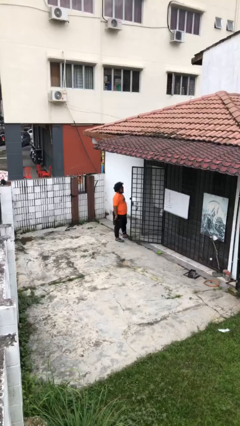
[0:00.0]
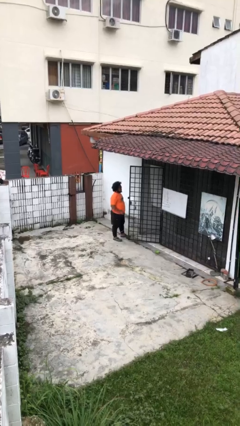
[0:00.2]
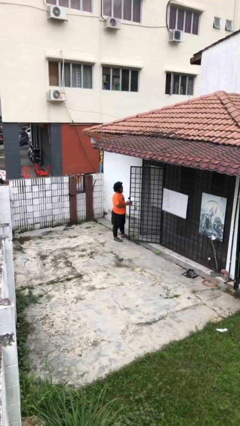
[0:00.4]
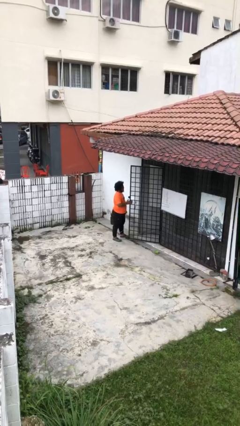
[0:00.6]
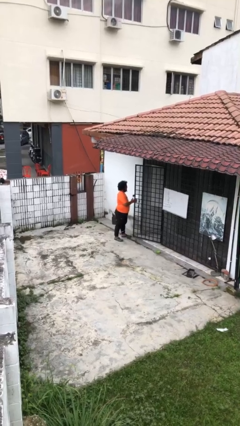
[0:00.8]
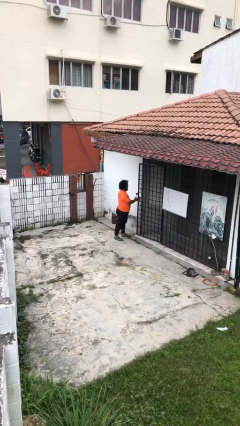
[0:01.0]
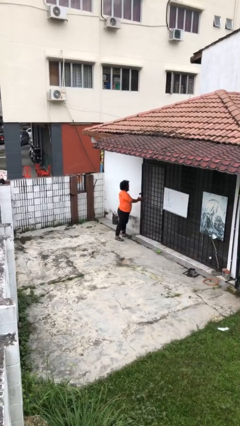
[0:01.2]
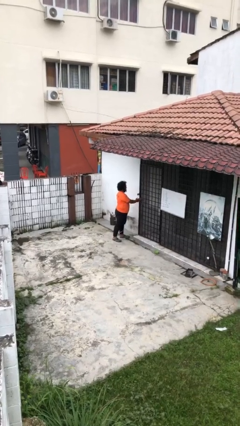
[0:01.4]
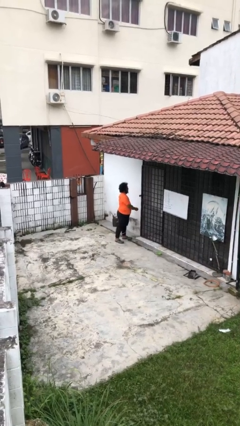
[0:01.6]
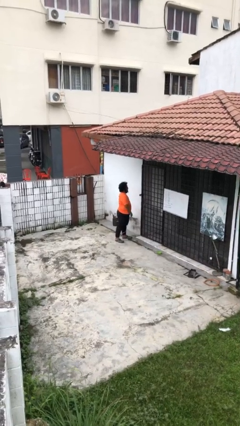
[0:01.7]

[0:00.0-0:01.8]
person closes facility door

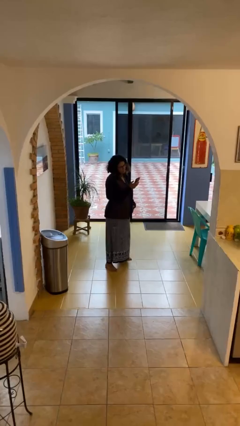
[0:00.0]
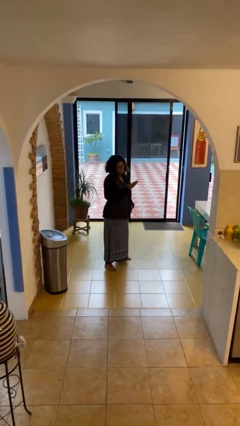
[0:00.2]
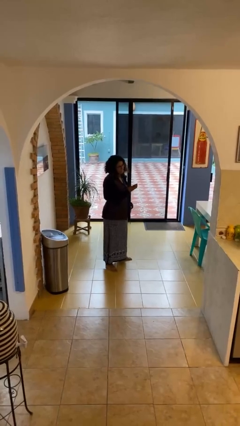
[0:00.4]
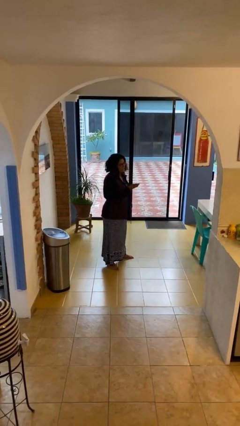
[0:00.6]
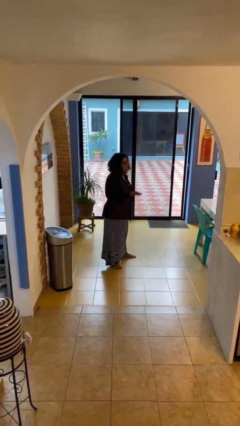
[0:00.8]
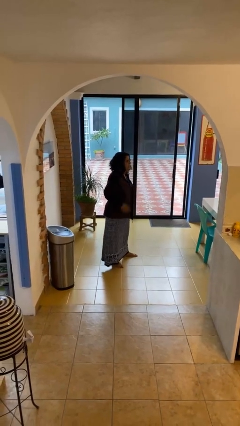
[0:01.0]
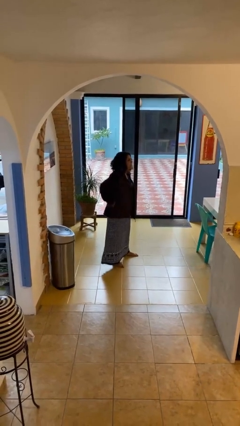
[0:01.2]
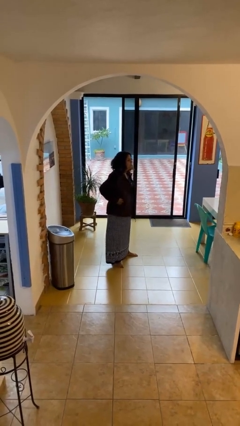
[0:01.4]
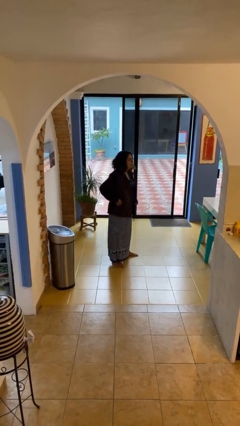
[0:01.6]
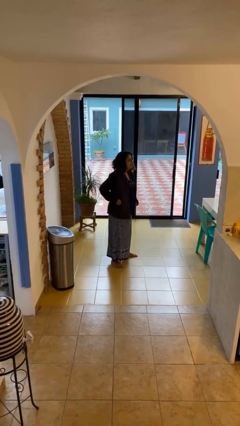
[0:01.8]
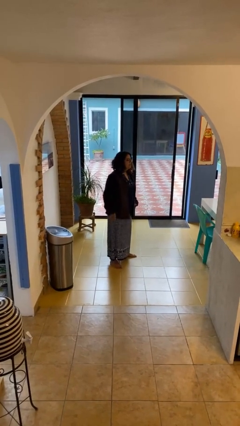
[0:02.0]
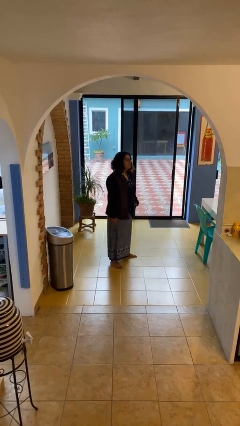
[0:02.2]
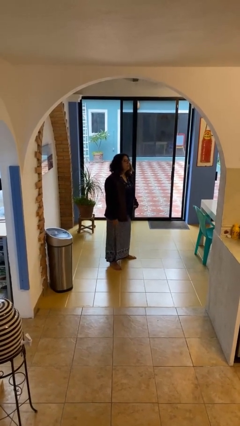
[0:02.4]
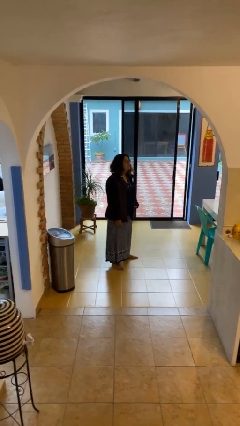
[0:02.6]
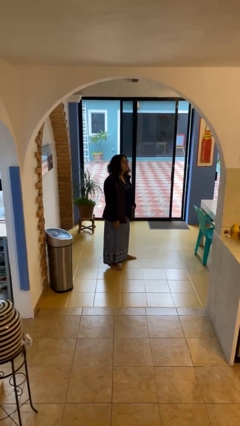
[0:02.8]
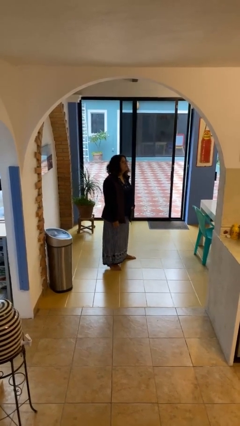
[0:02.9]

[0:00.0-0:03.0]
person puts phone into pocket

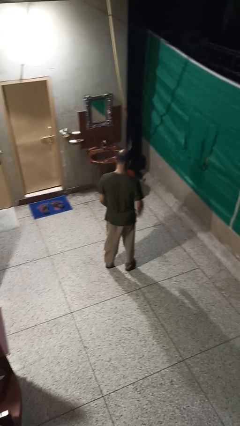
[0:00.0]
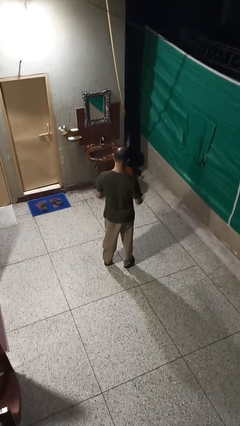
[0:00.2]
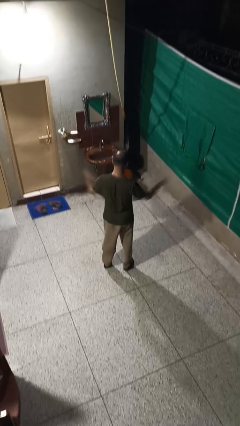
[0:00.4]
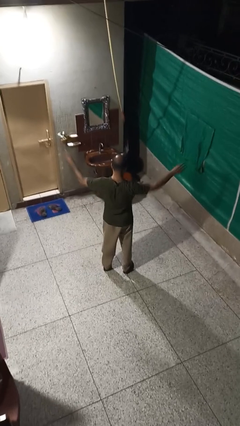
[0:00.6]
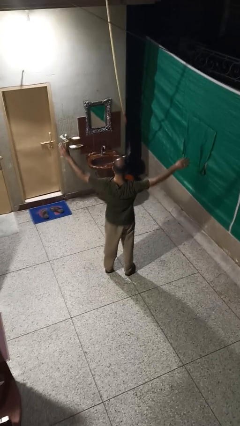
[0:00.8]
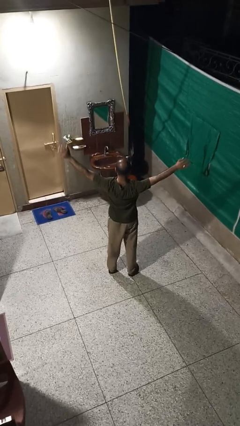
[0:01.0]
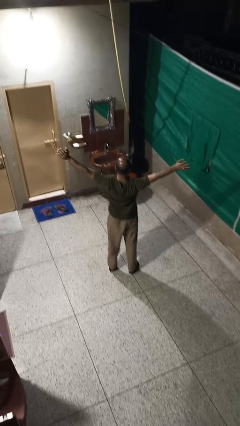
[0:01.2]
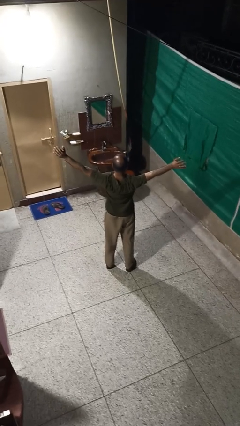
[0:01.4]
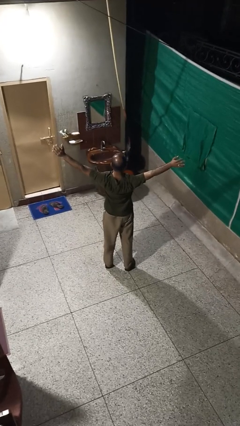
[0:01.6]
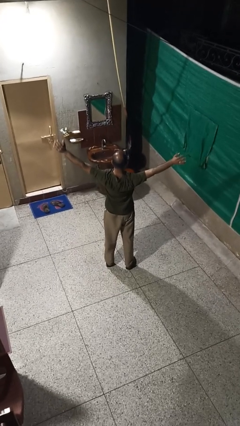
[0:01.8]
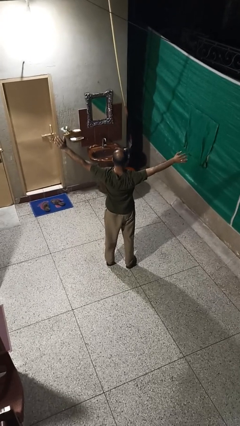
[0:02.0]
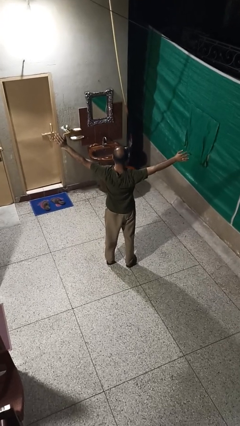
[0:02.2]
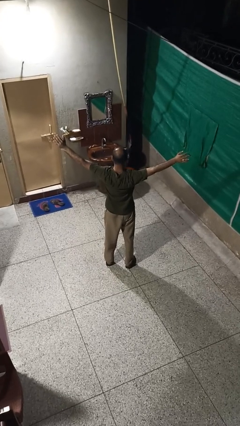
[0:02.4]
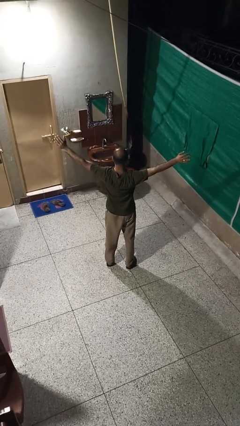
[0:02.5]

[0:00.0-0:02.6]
person stretches arms to side

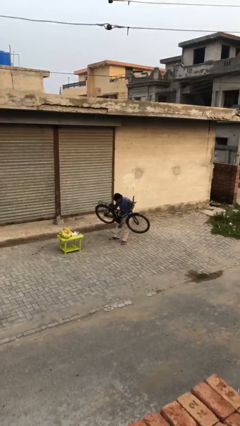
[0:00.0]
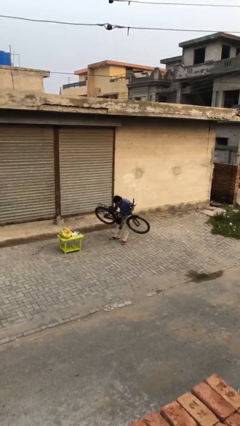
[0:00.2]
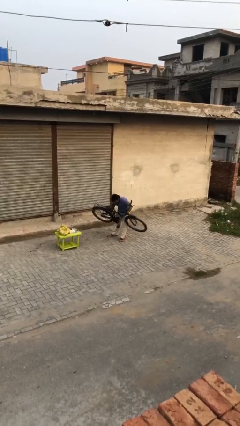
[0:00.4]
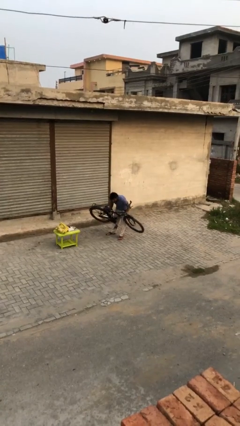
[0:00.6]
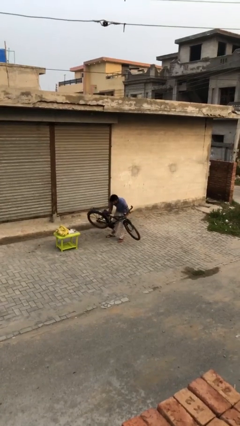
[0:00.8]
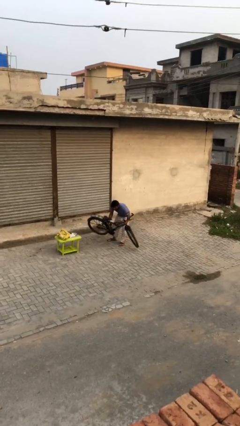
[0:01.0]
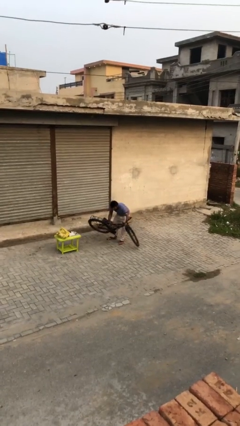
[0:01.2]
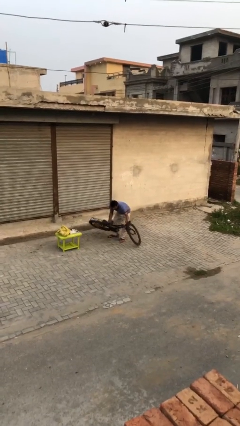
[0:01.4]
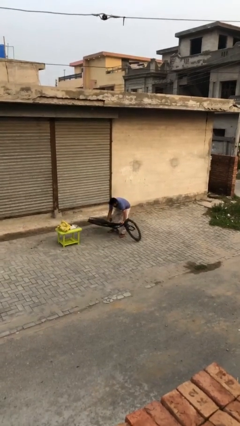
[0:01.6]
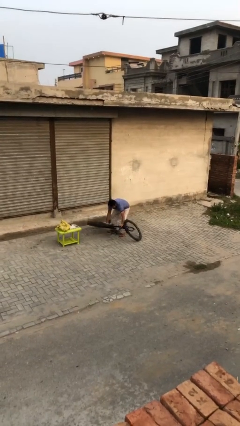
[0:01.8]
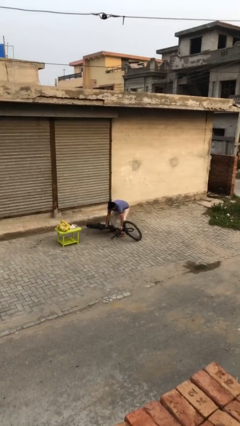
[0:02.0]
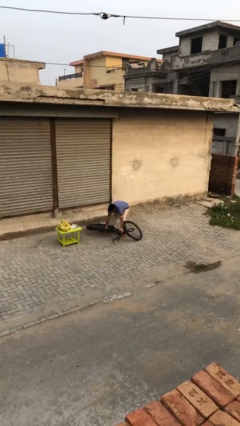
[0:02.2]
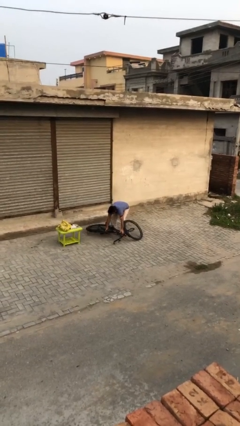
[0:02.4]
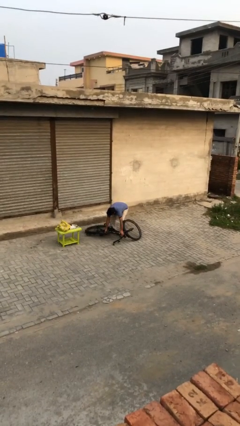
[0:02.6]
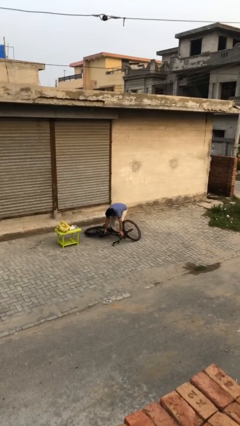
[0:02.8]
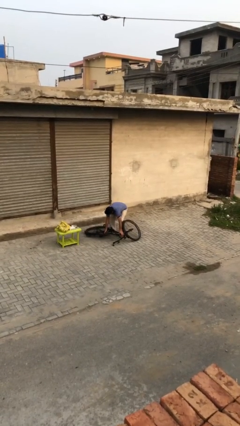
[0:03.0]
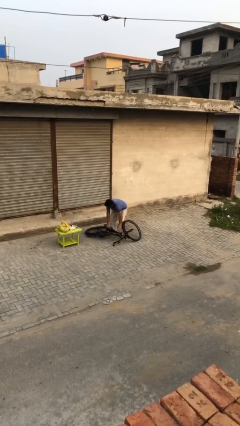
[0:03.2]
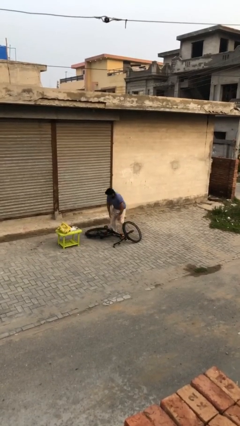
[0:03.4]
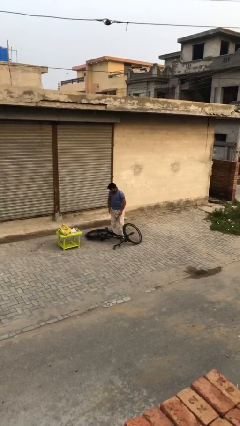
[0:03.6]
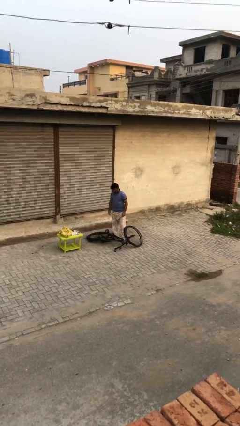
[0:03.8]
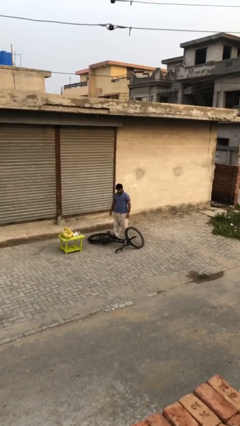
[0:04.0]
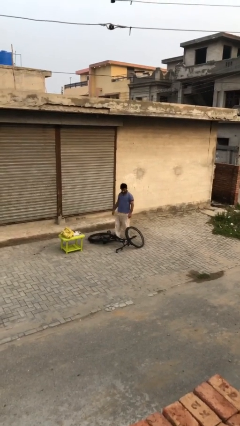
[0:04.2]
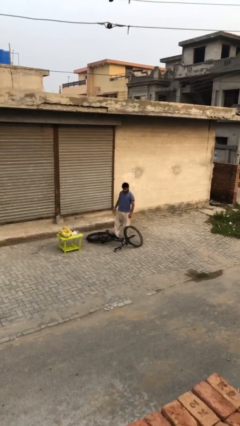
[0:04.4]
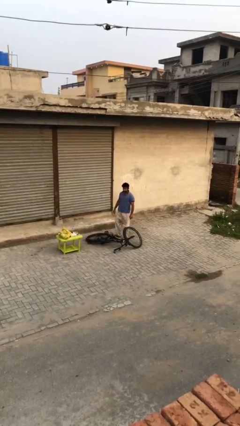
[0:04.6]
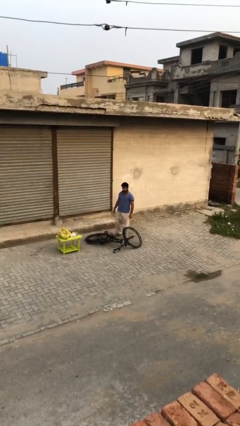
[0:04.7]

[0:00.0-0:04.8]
person puts down object on floor

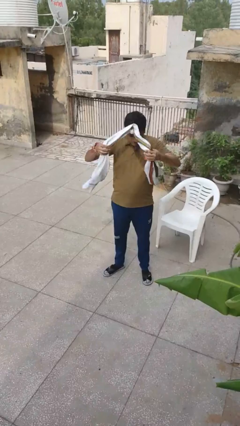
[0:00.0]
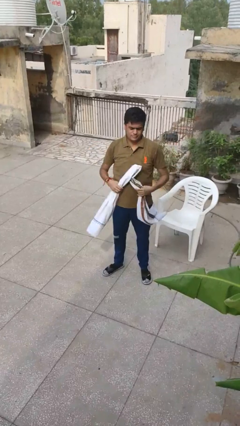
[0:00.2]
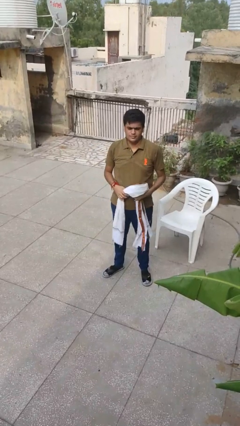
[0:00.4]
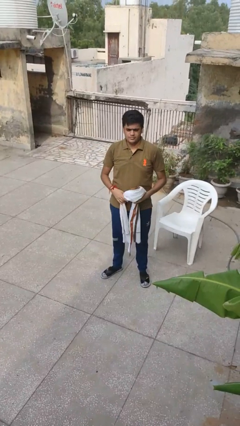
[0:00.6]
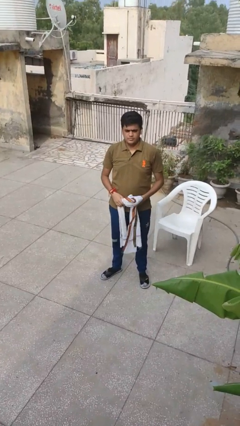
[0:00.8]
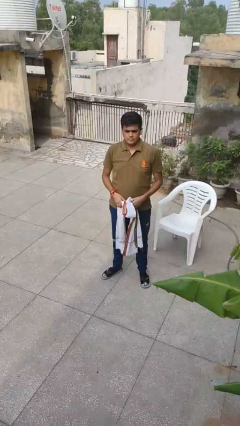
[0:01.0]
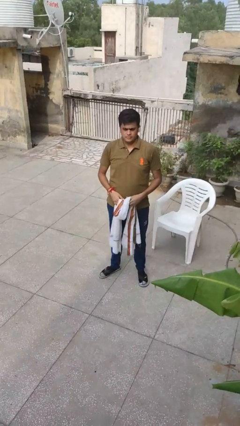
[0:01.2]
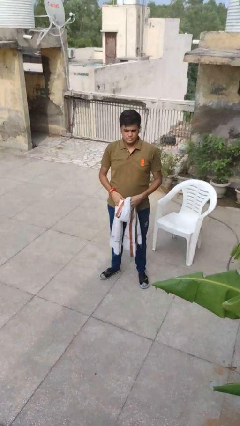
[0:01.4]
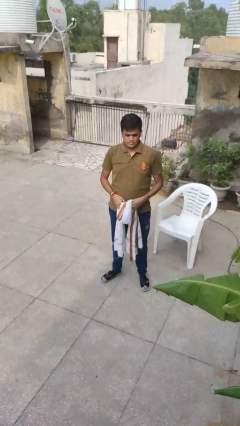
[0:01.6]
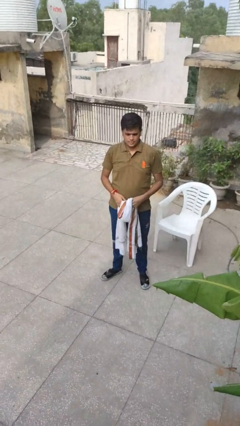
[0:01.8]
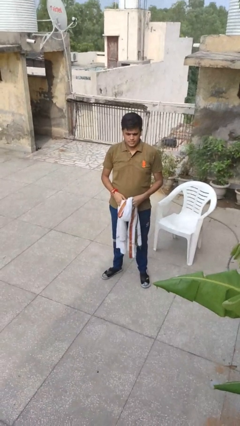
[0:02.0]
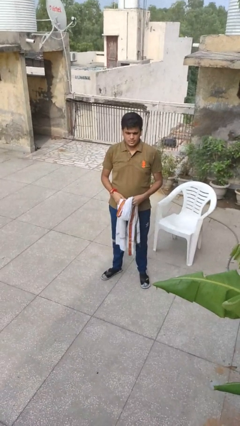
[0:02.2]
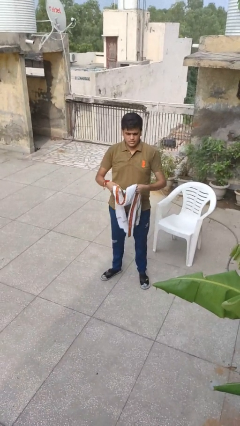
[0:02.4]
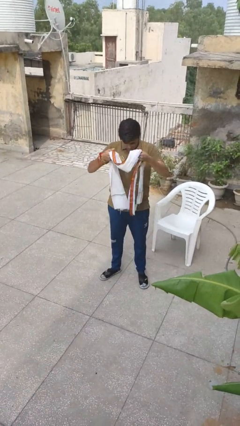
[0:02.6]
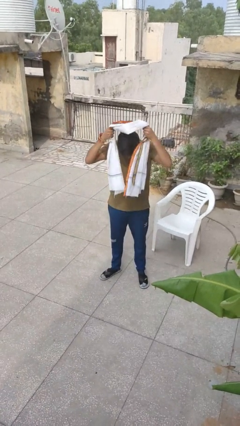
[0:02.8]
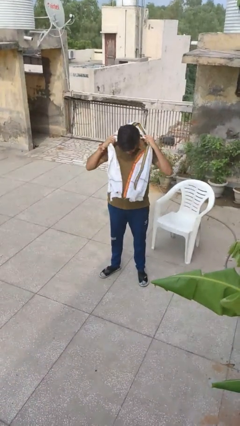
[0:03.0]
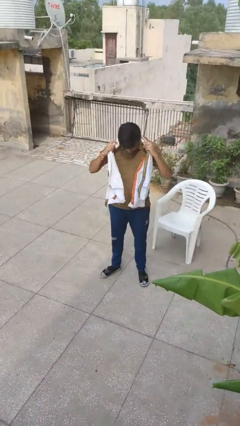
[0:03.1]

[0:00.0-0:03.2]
person takes off scarf

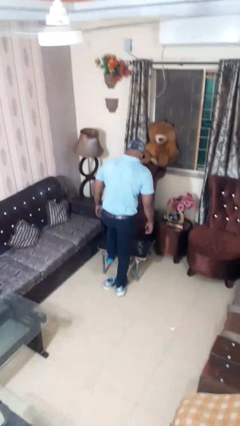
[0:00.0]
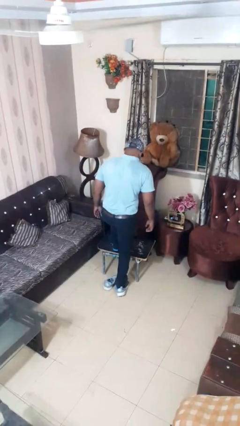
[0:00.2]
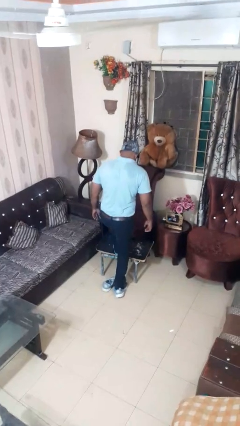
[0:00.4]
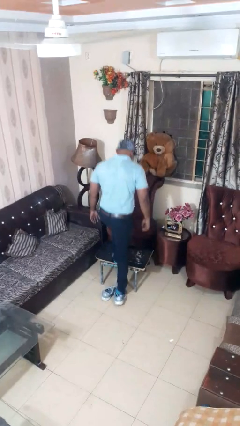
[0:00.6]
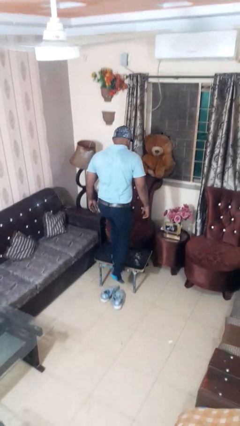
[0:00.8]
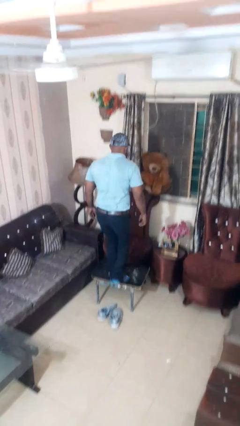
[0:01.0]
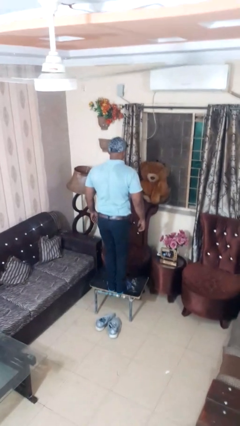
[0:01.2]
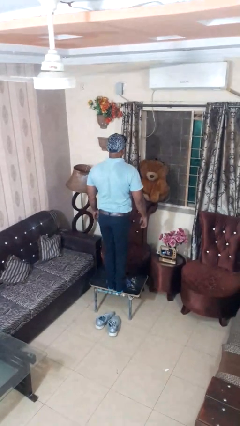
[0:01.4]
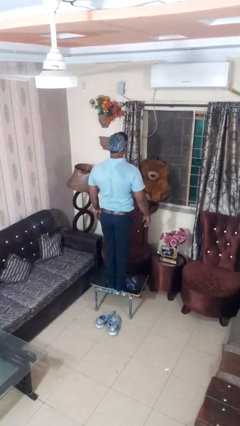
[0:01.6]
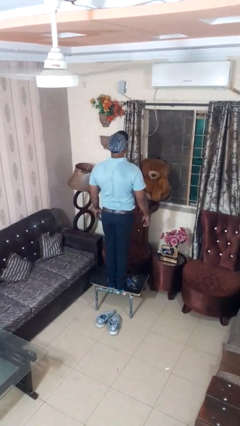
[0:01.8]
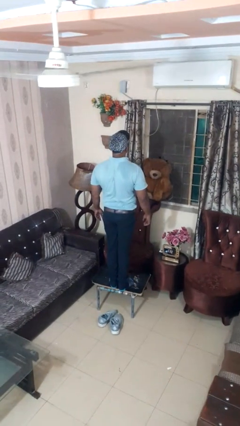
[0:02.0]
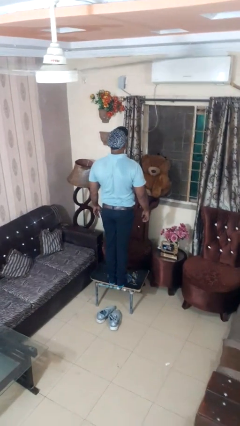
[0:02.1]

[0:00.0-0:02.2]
person climbs on table

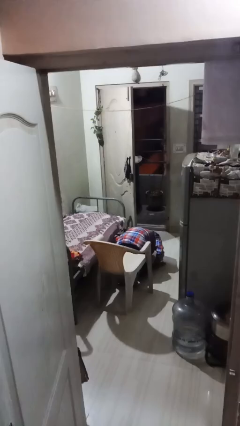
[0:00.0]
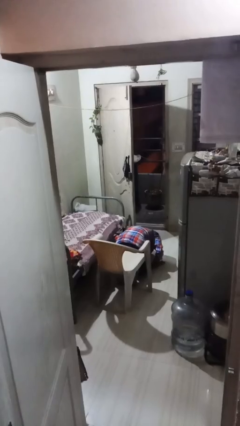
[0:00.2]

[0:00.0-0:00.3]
person stands up from floor
